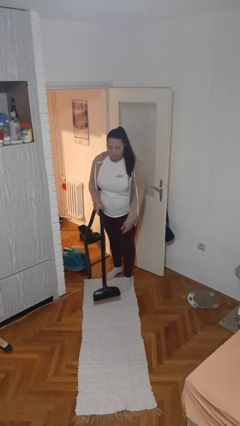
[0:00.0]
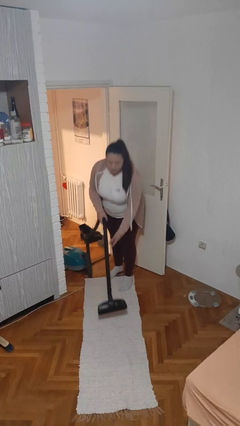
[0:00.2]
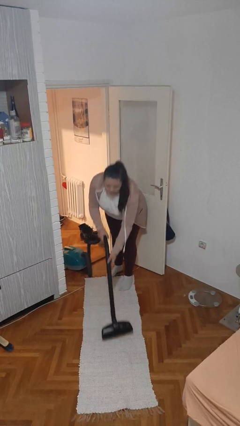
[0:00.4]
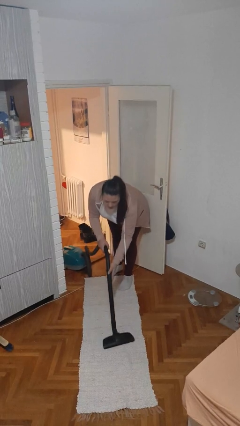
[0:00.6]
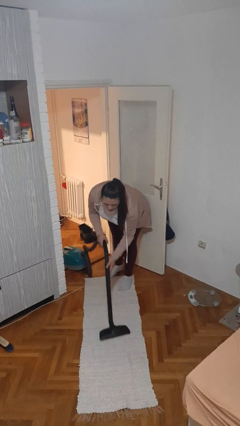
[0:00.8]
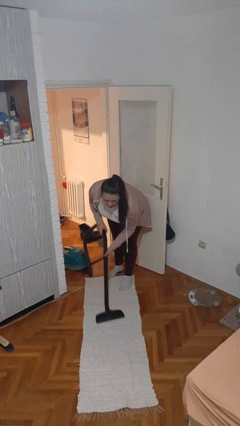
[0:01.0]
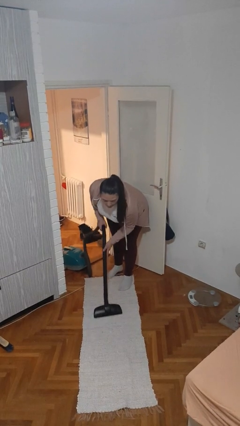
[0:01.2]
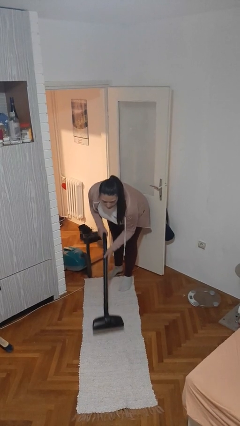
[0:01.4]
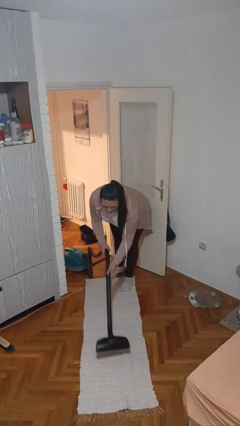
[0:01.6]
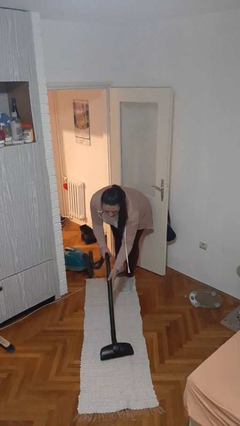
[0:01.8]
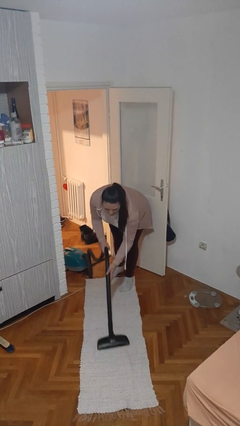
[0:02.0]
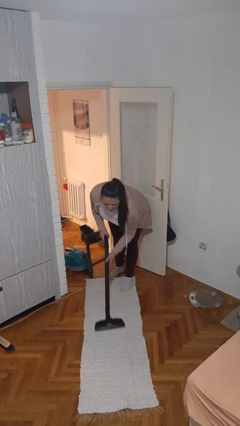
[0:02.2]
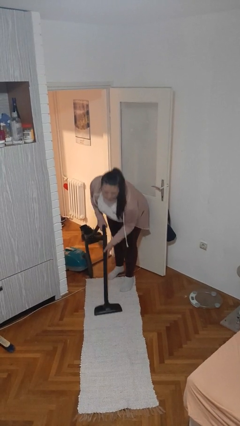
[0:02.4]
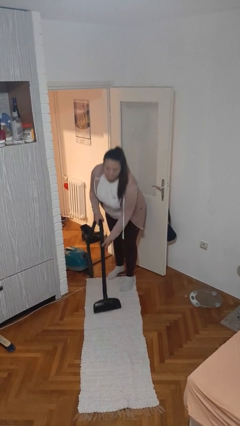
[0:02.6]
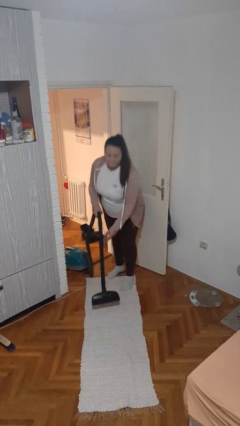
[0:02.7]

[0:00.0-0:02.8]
person vacuums carpet

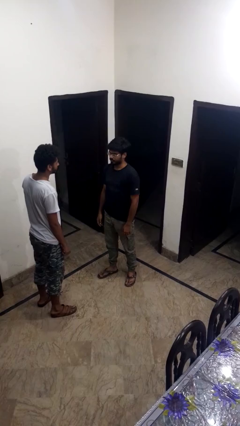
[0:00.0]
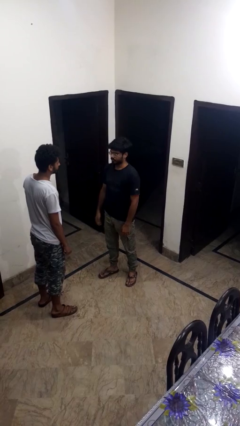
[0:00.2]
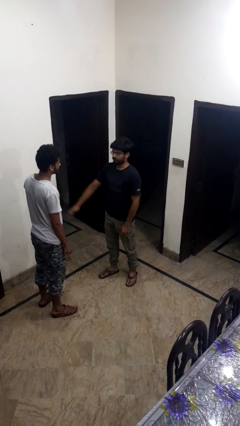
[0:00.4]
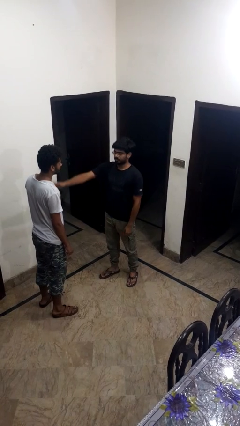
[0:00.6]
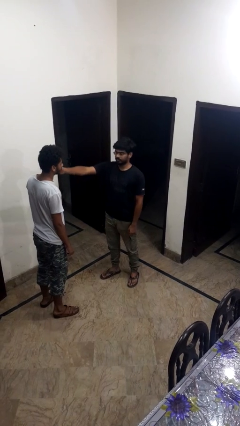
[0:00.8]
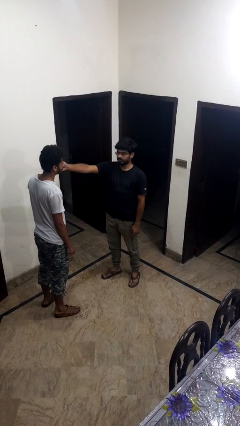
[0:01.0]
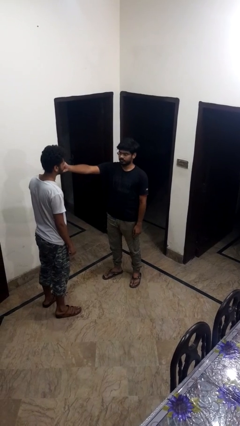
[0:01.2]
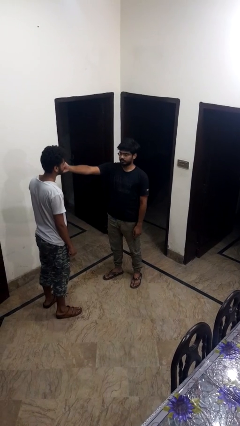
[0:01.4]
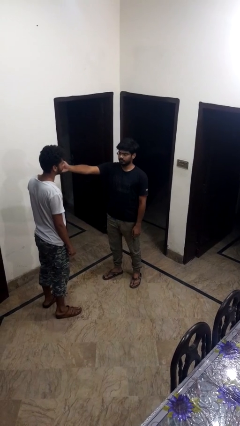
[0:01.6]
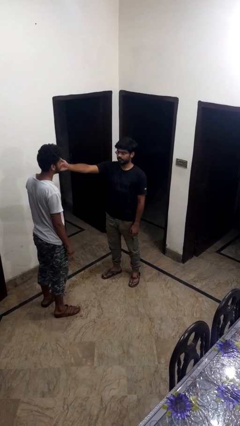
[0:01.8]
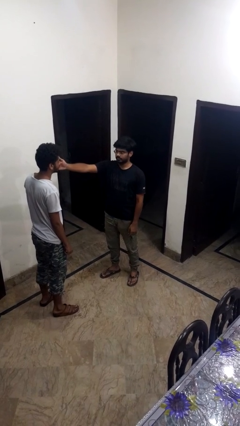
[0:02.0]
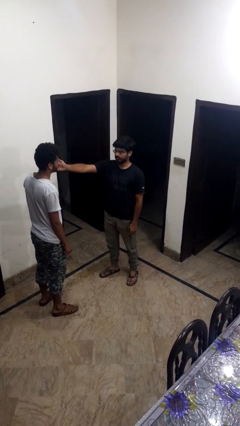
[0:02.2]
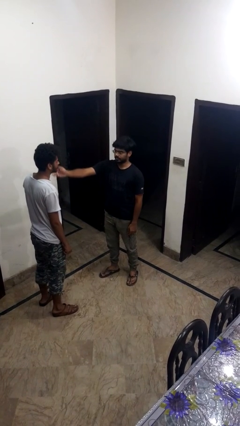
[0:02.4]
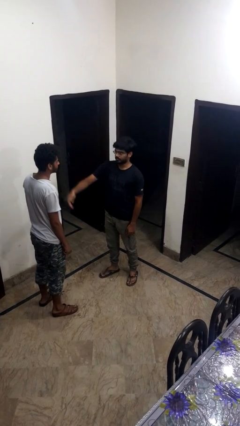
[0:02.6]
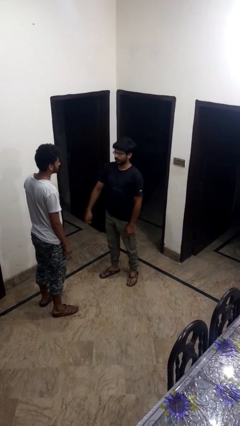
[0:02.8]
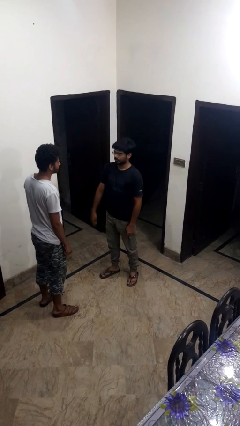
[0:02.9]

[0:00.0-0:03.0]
person touches face of person

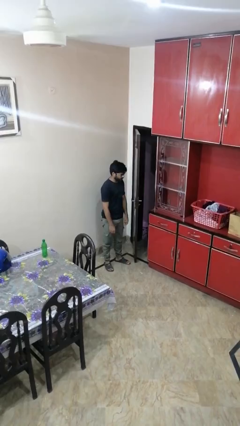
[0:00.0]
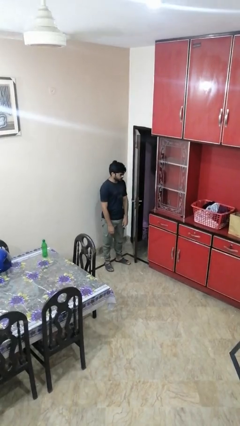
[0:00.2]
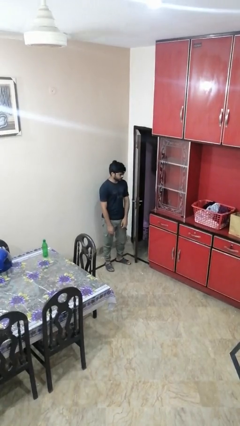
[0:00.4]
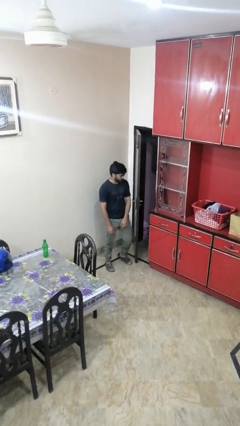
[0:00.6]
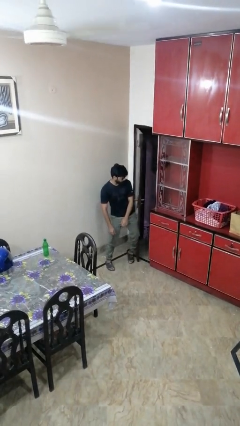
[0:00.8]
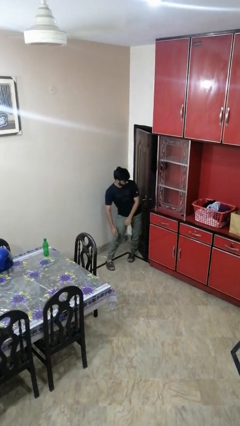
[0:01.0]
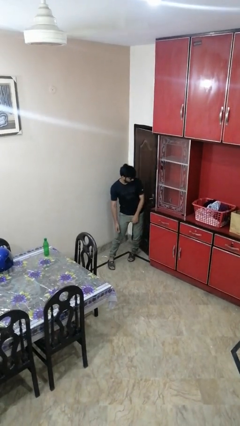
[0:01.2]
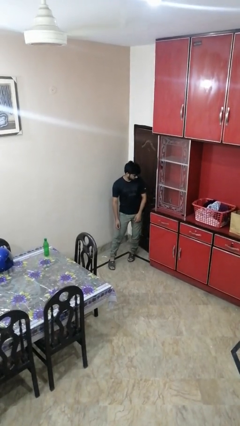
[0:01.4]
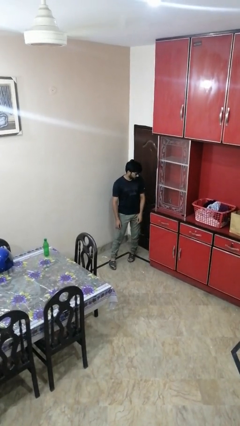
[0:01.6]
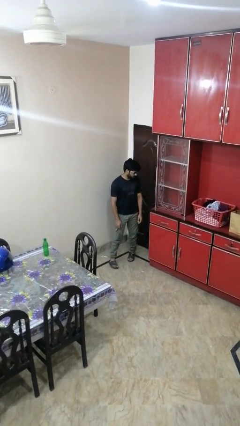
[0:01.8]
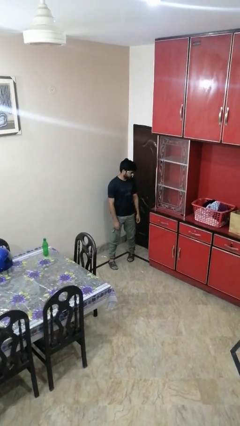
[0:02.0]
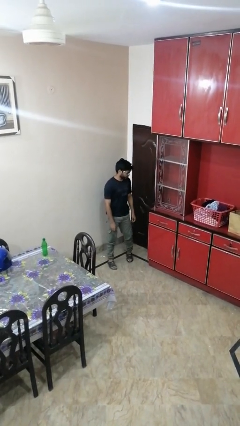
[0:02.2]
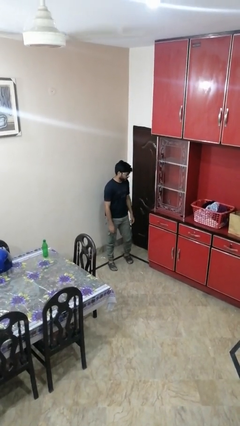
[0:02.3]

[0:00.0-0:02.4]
person closes door with hip

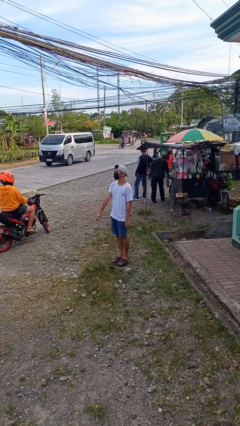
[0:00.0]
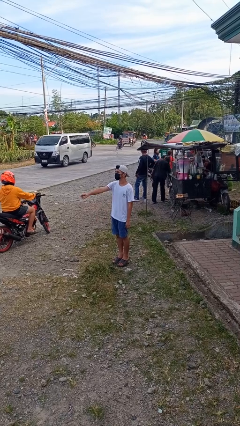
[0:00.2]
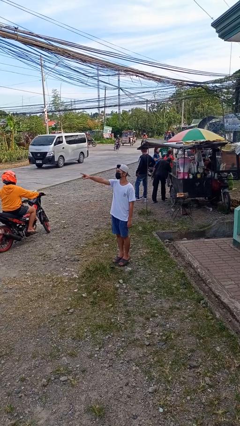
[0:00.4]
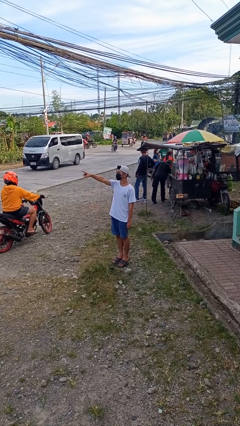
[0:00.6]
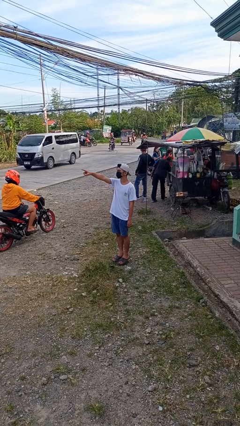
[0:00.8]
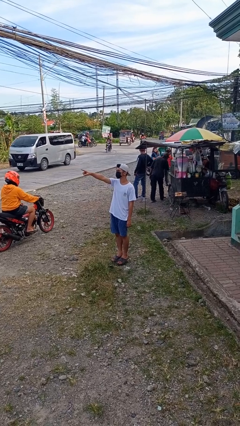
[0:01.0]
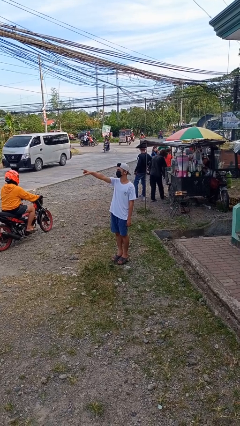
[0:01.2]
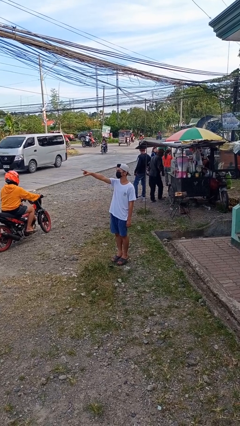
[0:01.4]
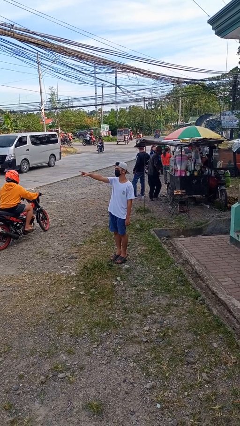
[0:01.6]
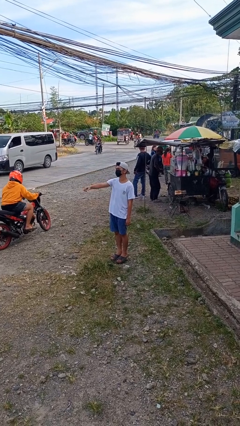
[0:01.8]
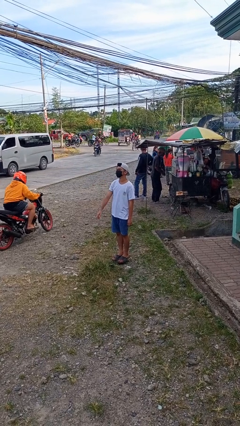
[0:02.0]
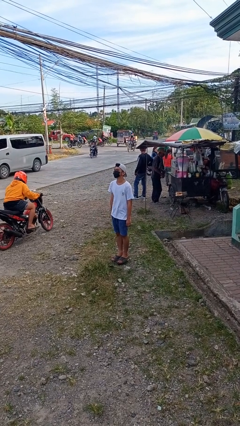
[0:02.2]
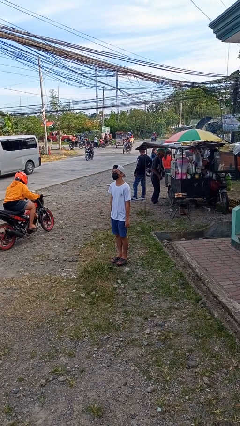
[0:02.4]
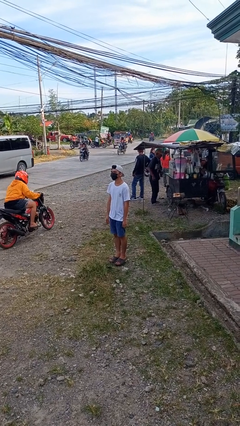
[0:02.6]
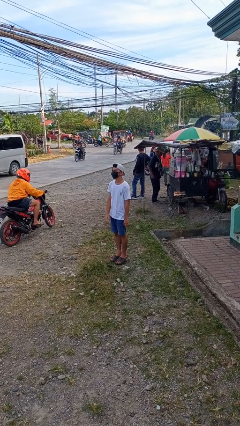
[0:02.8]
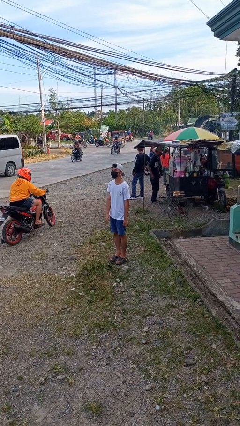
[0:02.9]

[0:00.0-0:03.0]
person points at person

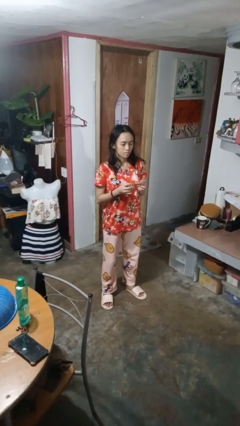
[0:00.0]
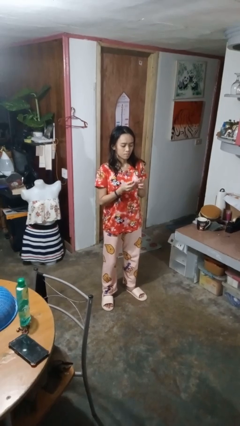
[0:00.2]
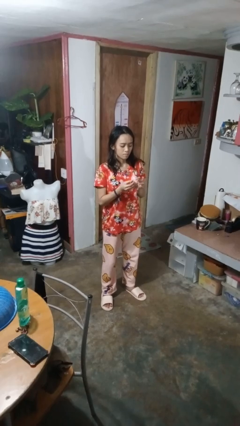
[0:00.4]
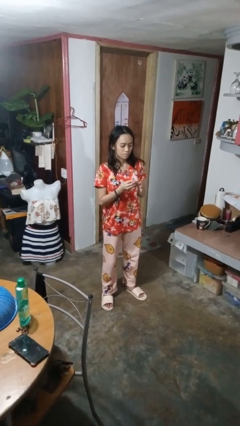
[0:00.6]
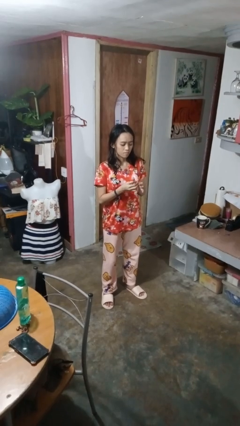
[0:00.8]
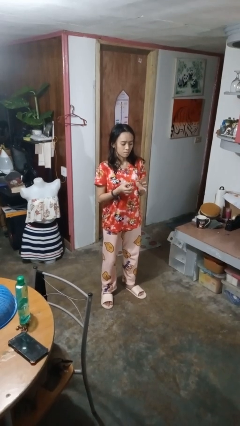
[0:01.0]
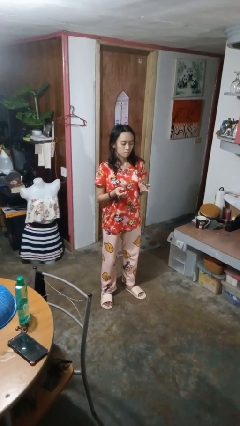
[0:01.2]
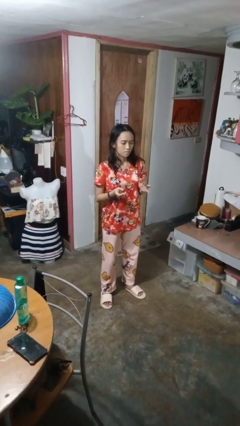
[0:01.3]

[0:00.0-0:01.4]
person puts on ring

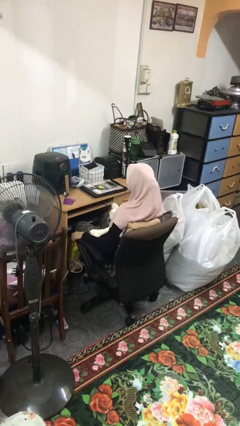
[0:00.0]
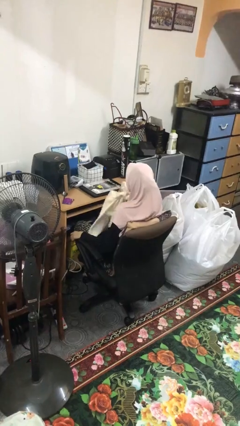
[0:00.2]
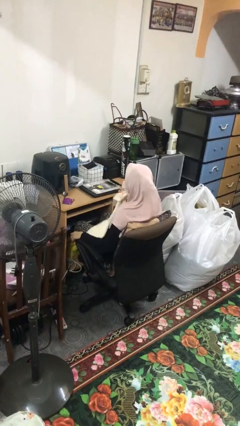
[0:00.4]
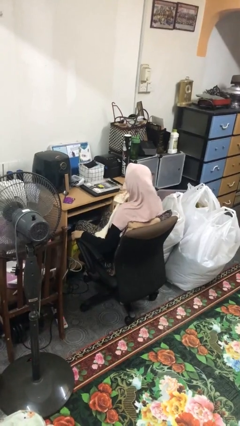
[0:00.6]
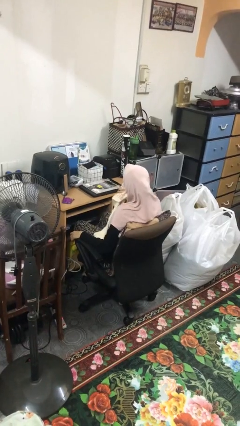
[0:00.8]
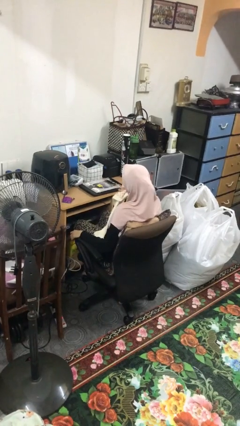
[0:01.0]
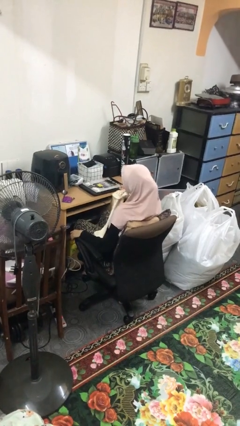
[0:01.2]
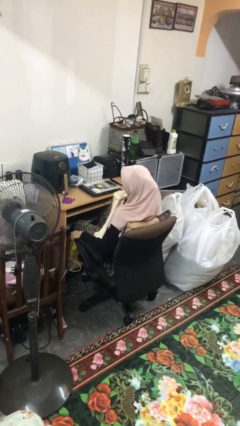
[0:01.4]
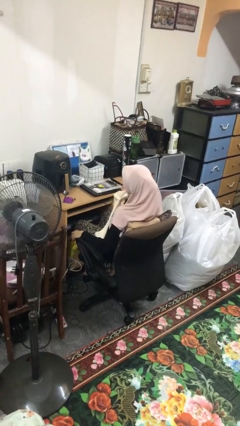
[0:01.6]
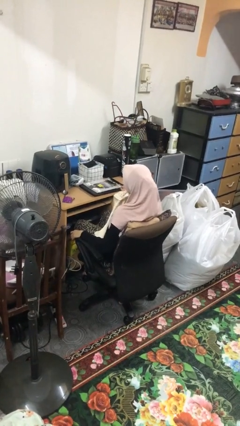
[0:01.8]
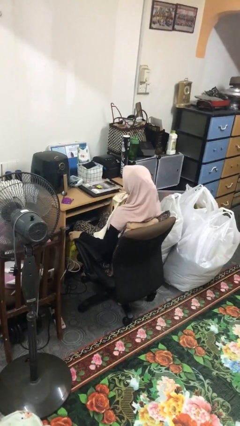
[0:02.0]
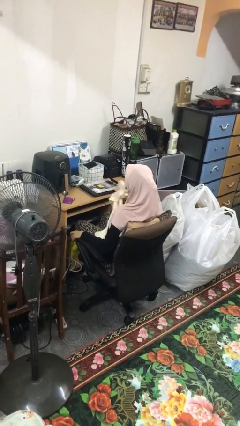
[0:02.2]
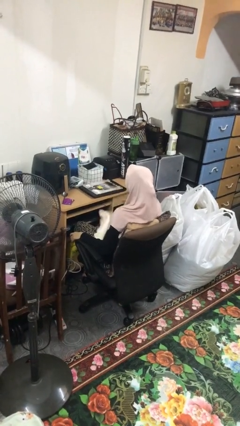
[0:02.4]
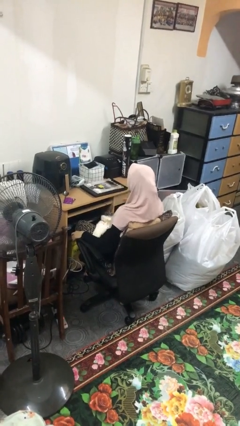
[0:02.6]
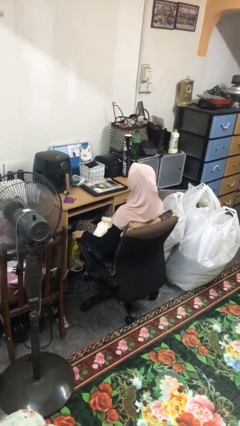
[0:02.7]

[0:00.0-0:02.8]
person wipes mouth with napkin

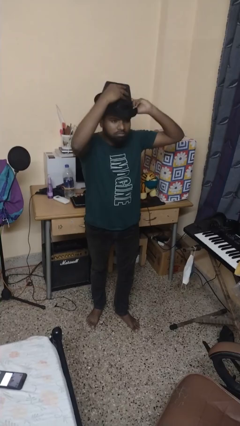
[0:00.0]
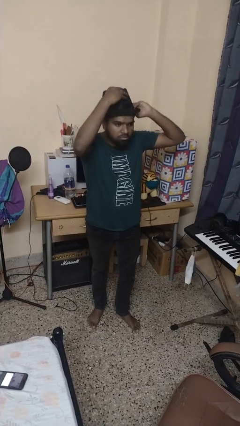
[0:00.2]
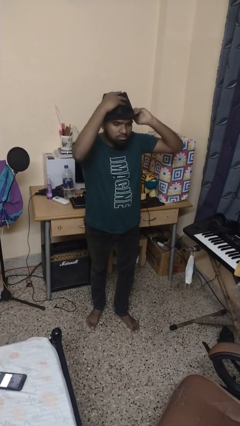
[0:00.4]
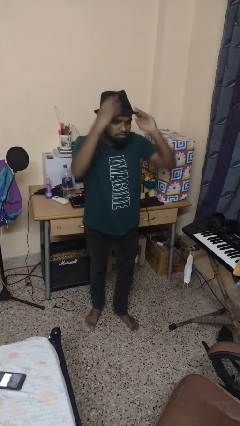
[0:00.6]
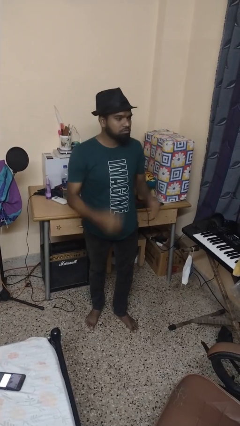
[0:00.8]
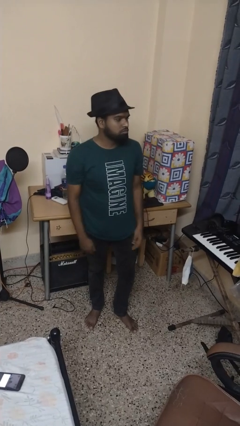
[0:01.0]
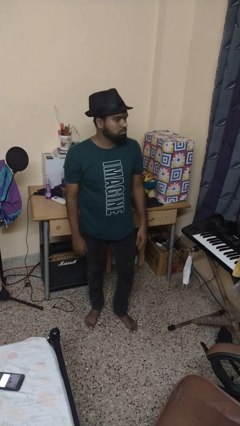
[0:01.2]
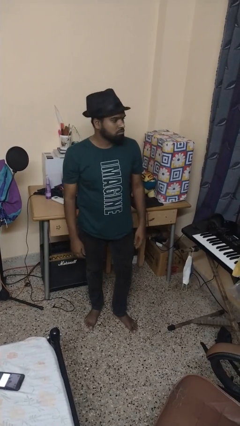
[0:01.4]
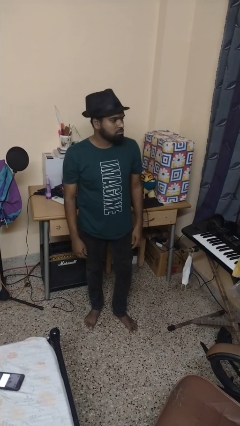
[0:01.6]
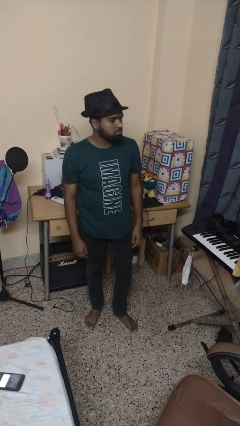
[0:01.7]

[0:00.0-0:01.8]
person puts on hat
